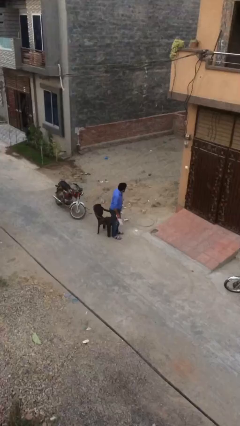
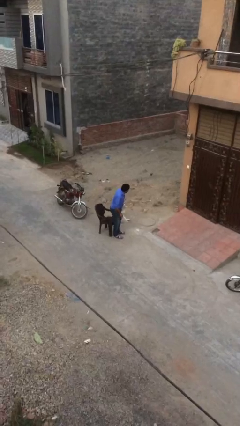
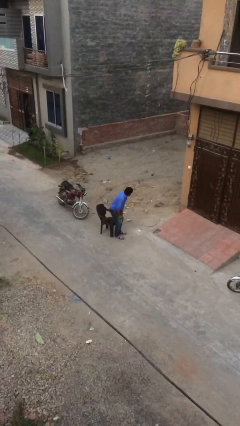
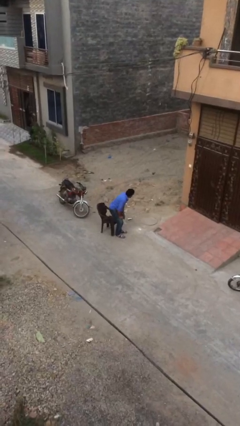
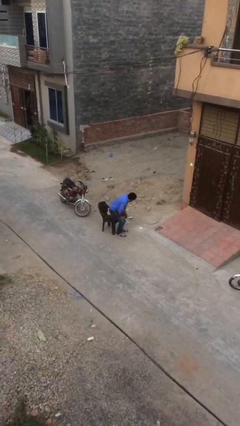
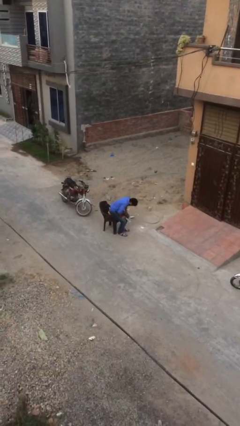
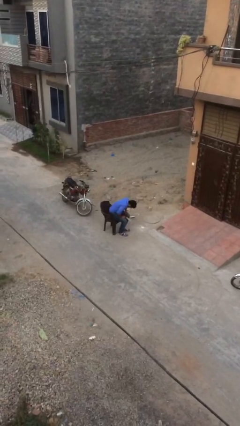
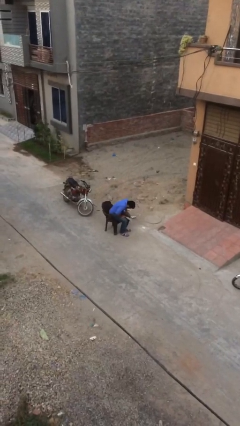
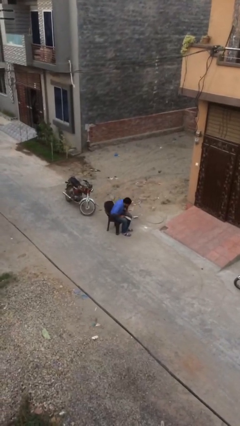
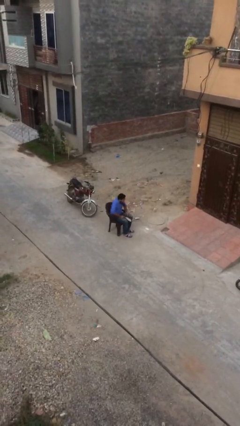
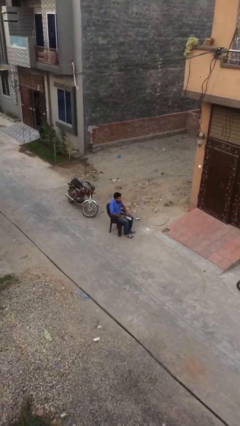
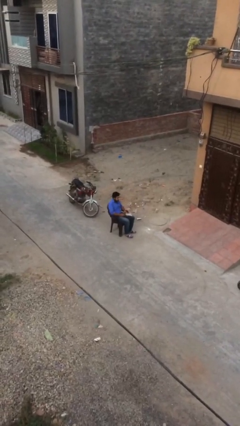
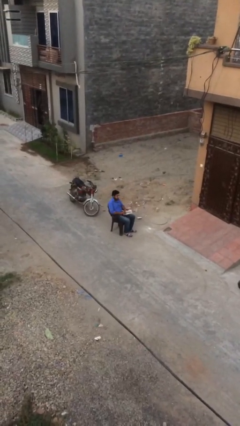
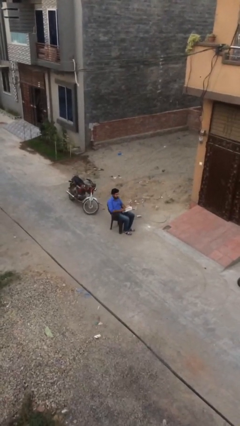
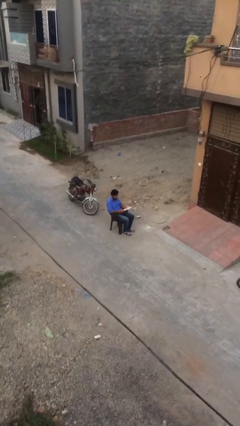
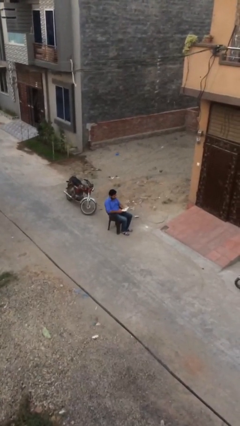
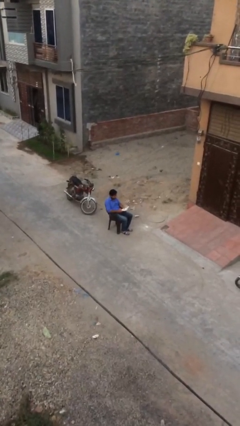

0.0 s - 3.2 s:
person sits down

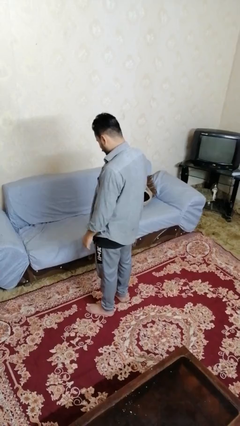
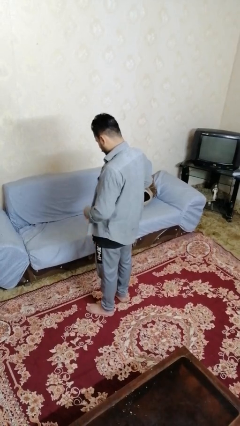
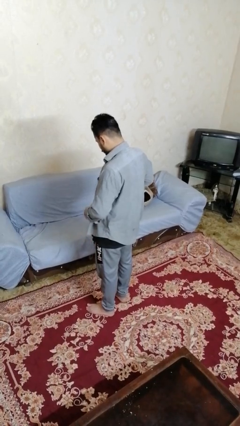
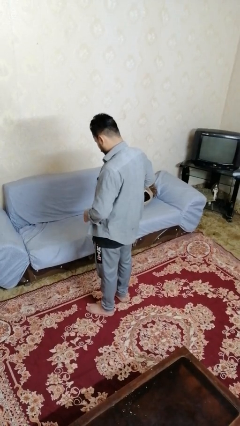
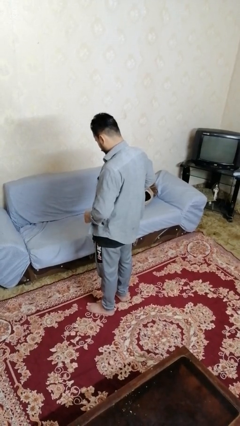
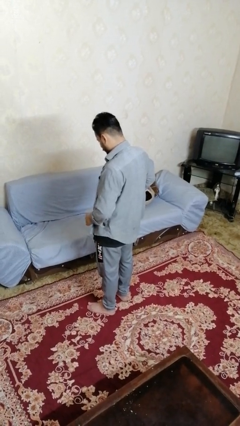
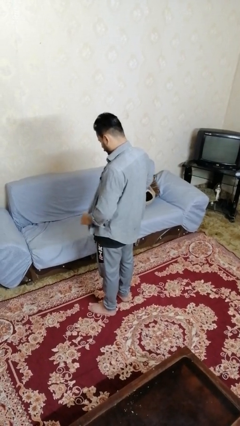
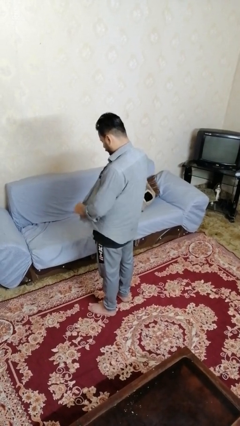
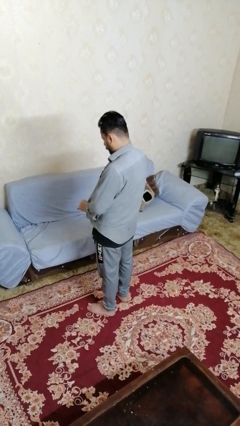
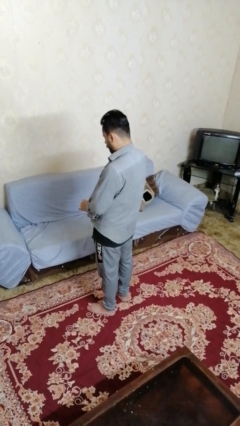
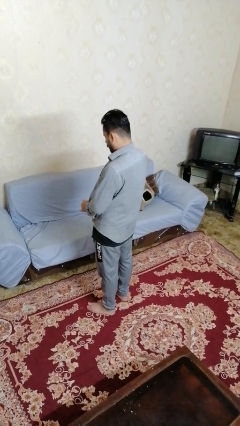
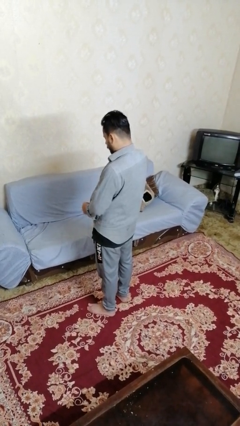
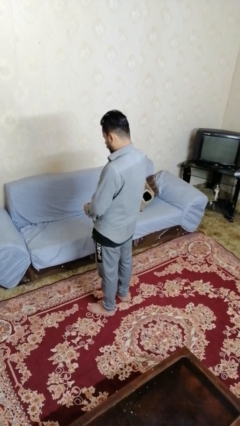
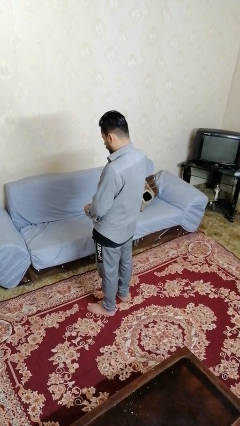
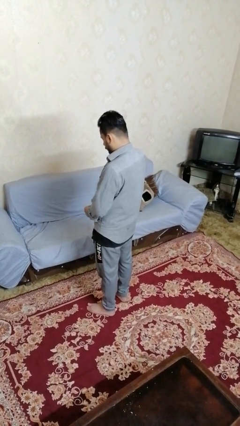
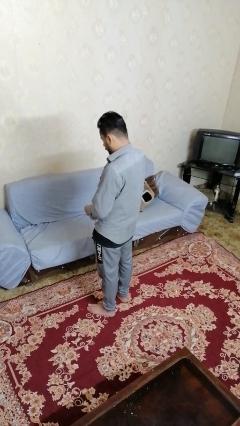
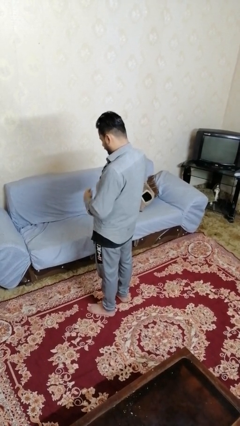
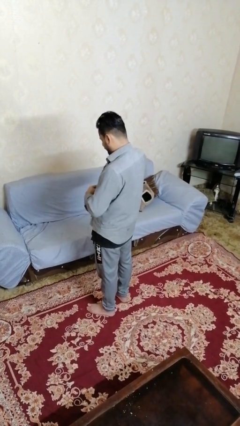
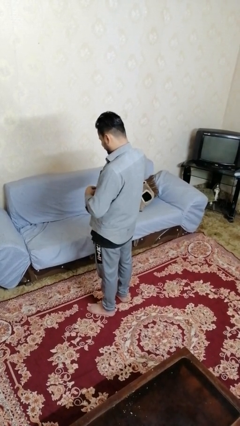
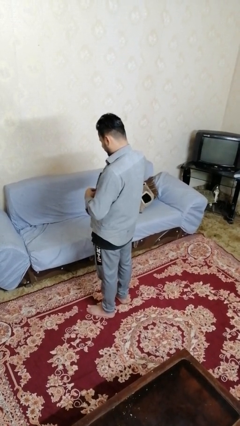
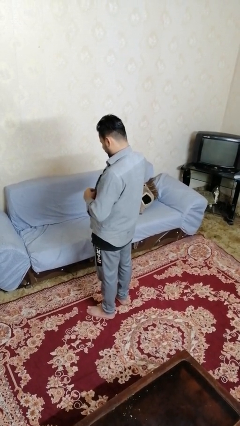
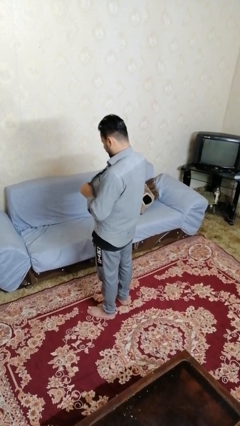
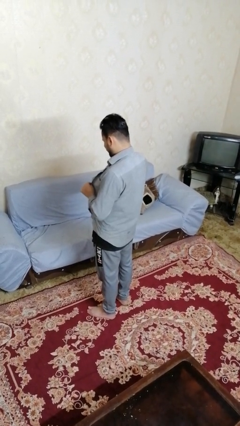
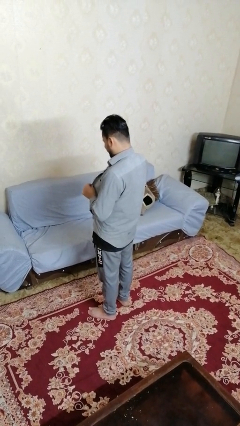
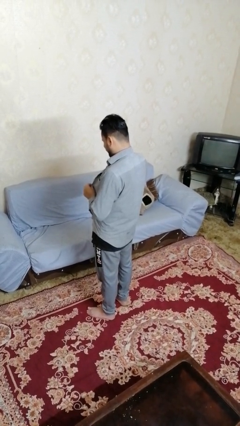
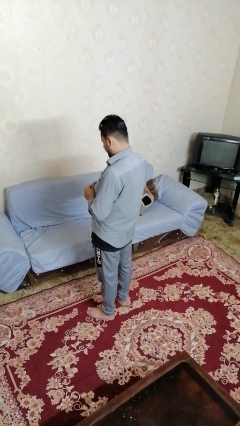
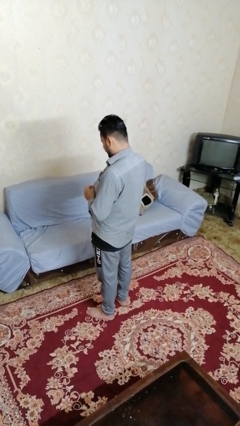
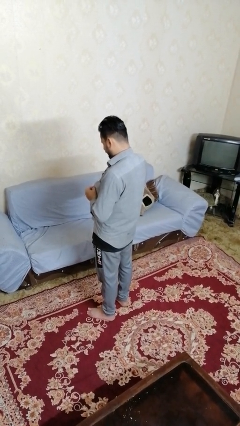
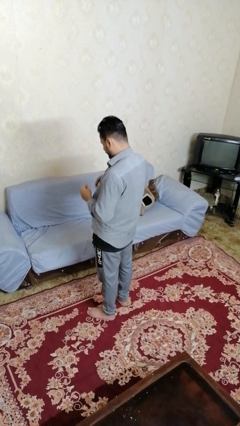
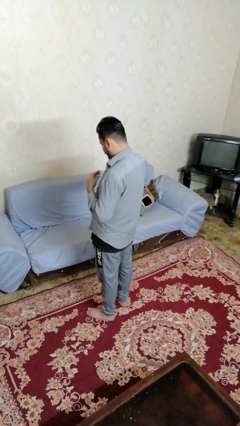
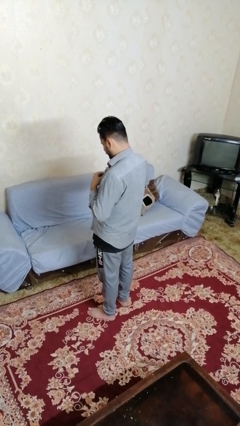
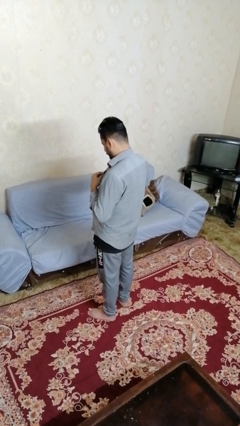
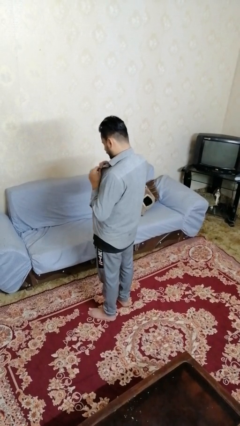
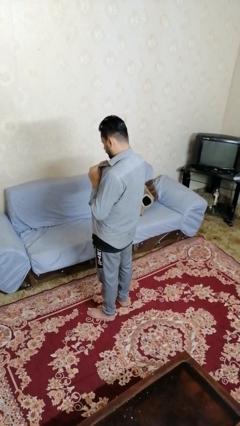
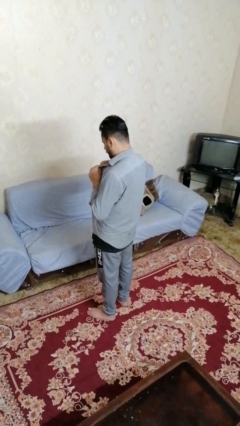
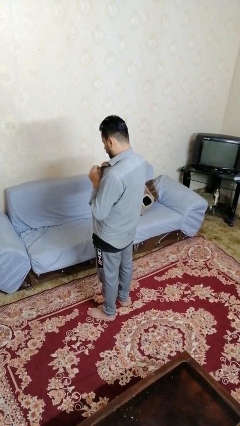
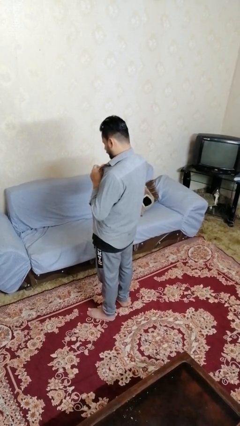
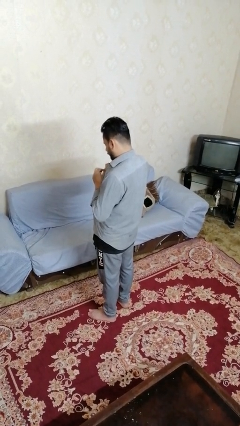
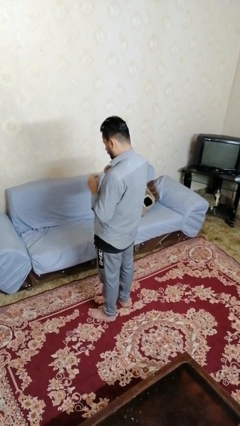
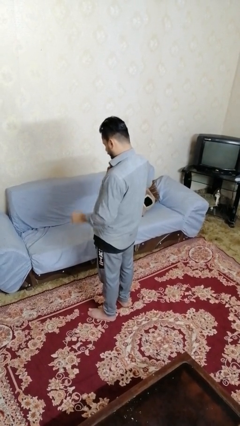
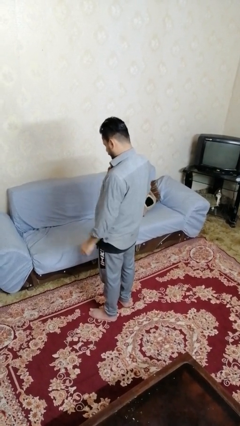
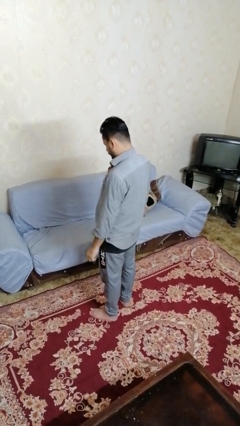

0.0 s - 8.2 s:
person buttons shirt

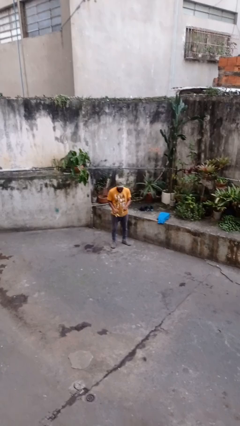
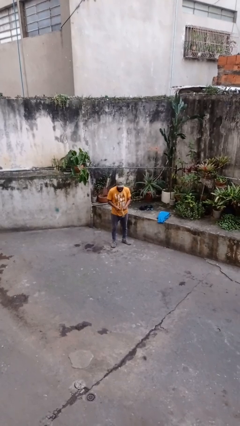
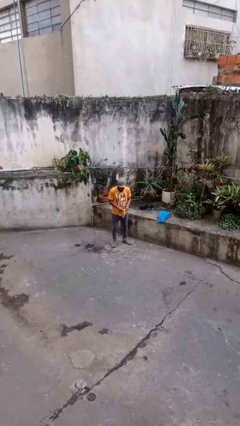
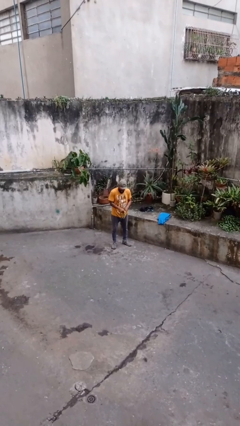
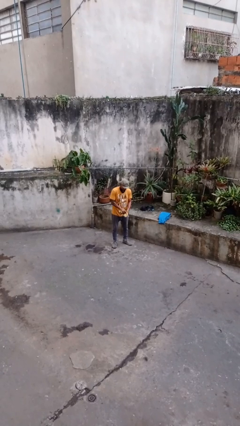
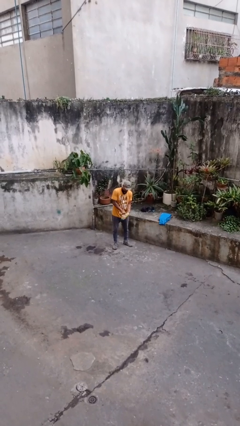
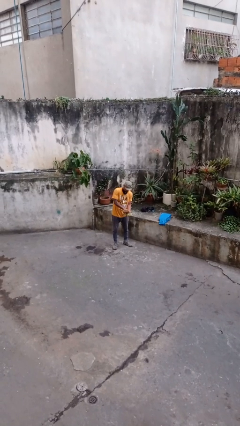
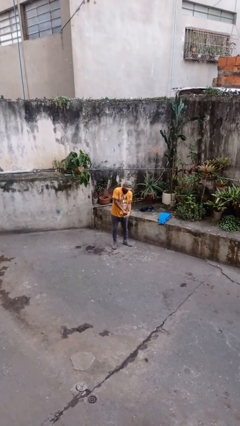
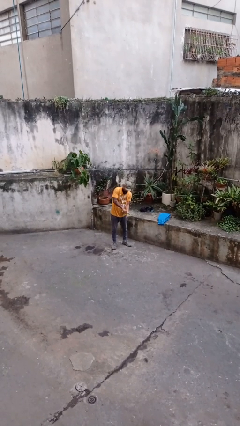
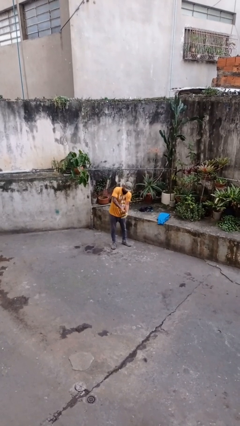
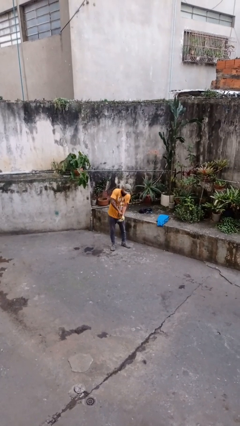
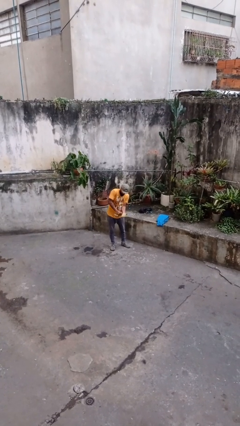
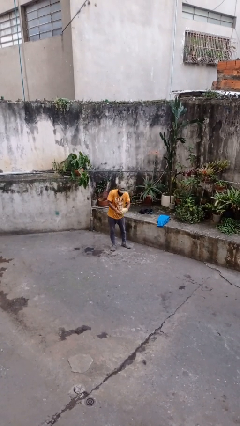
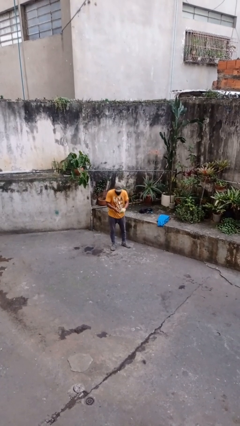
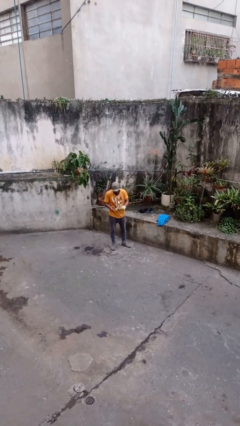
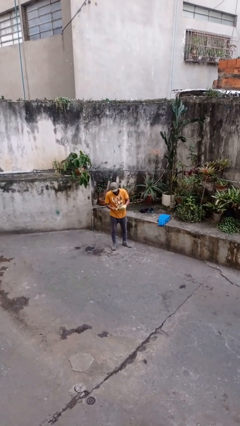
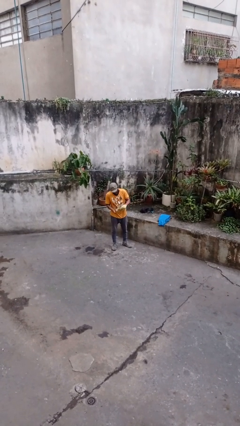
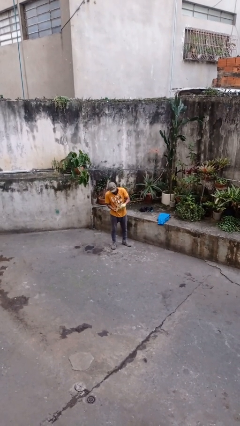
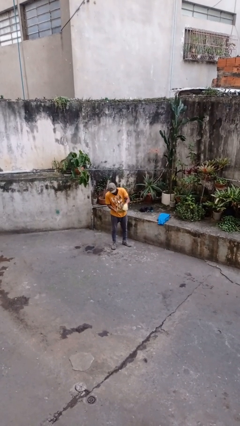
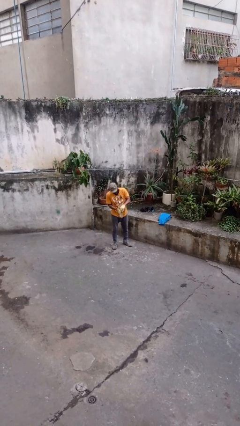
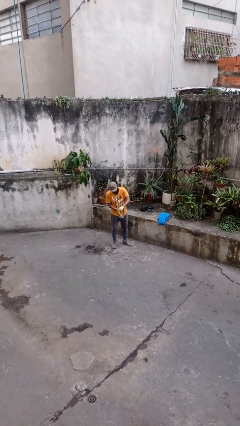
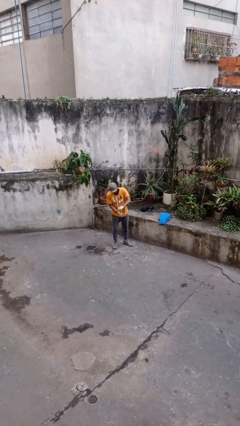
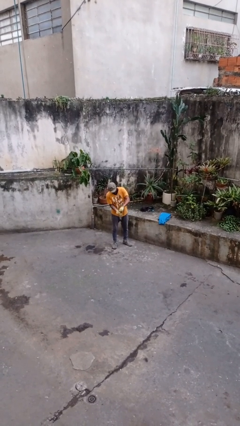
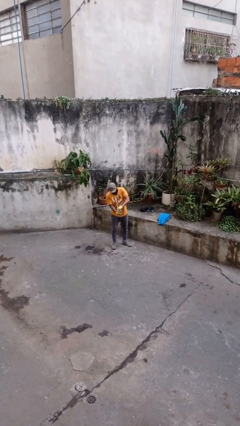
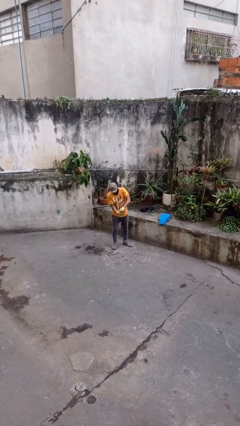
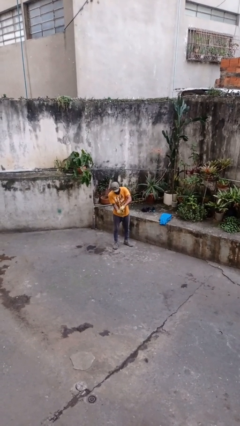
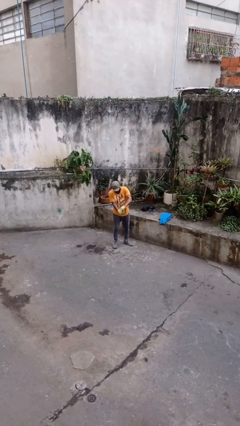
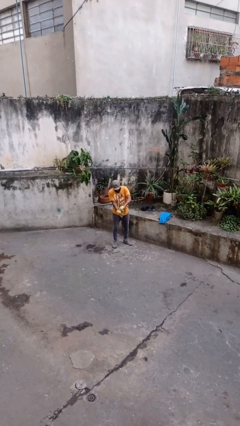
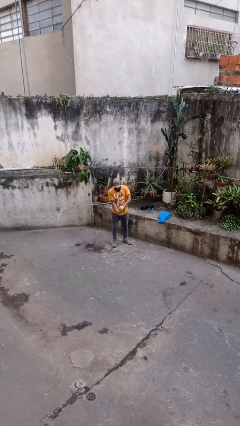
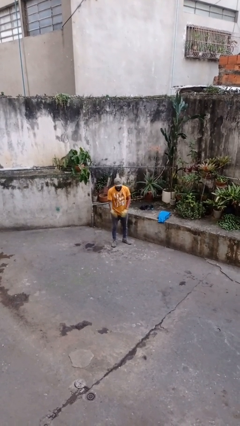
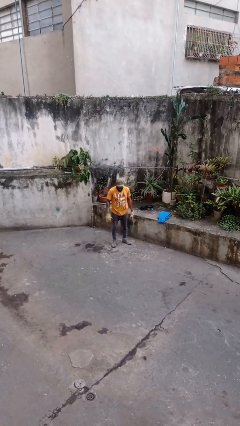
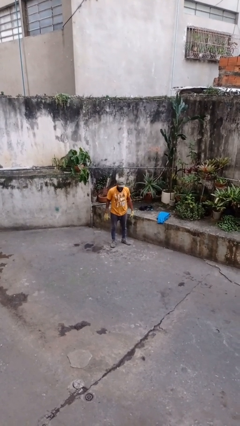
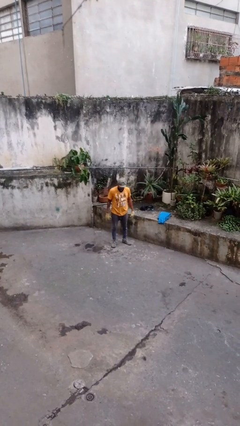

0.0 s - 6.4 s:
person puts on gloves

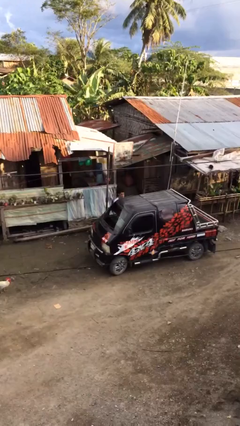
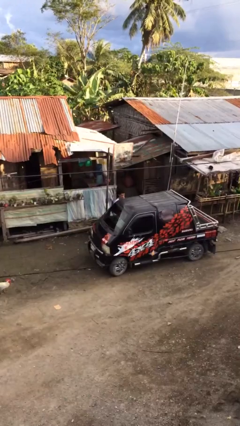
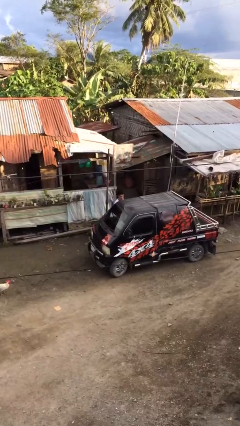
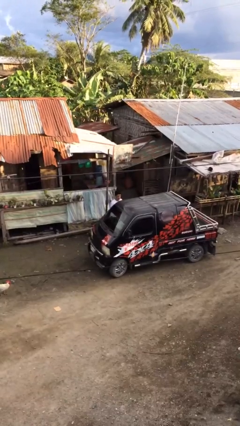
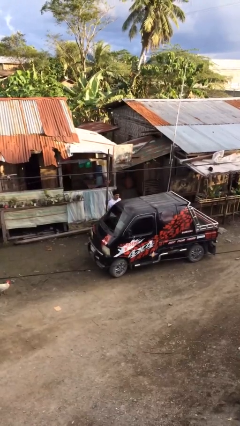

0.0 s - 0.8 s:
person closes car door
